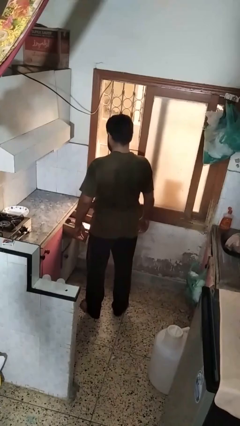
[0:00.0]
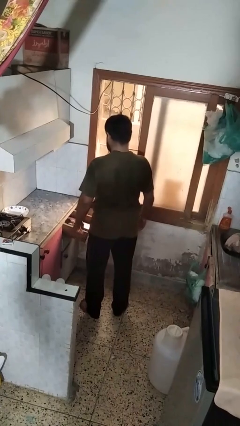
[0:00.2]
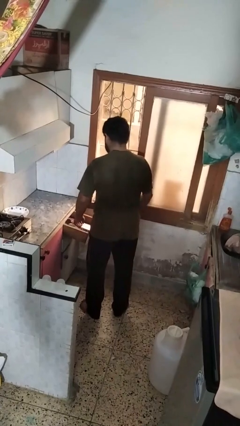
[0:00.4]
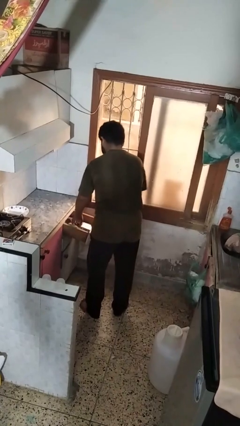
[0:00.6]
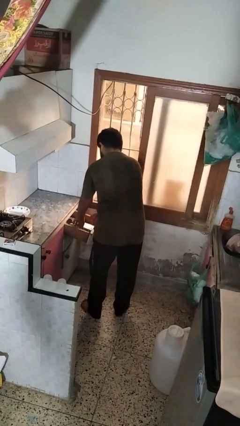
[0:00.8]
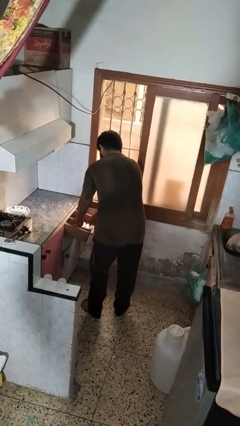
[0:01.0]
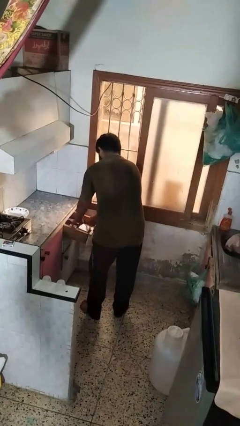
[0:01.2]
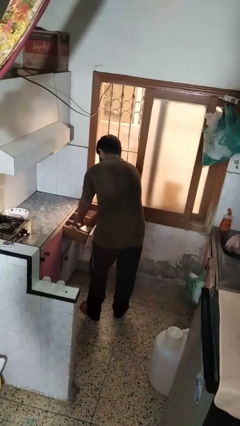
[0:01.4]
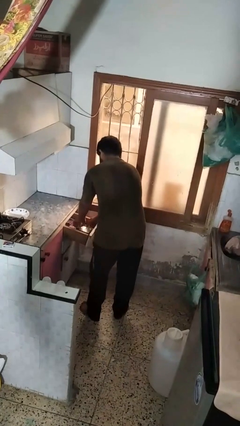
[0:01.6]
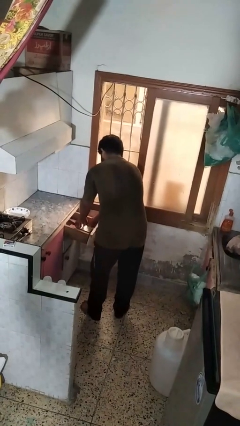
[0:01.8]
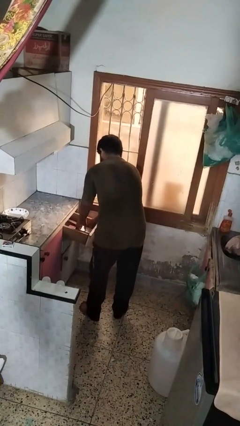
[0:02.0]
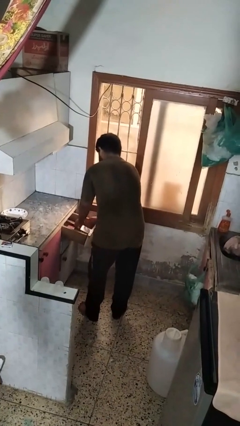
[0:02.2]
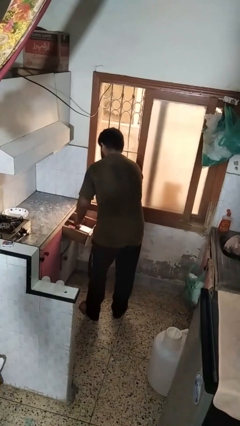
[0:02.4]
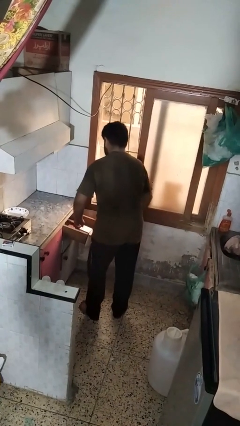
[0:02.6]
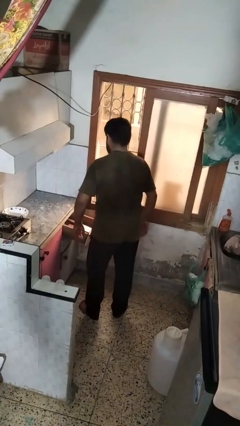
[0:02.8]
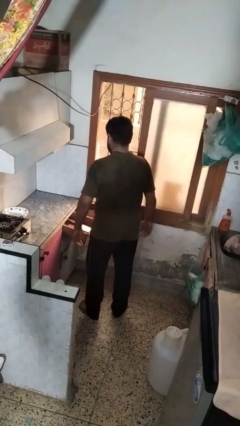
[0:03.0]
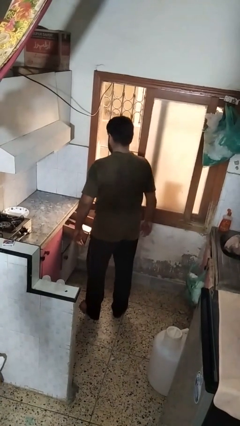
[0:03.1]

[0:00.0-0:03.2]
person searches in kitchen drawer

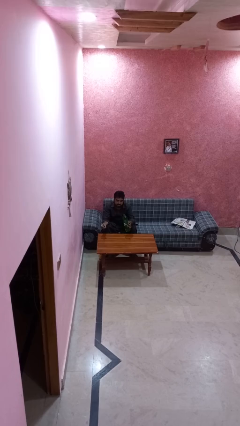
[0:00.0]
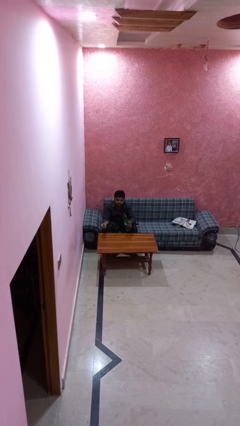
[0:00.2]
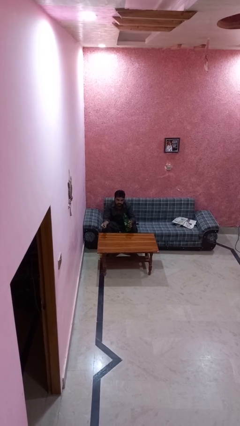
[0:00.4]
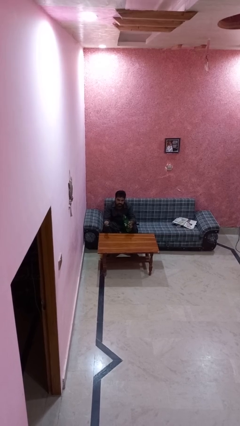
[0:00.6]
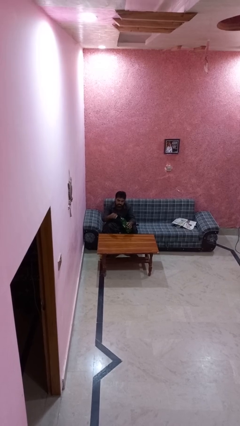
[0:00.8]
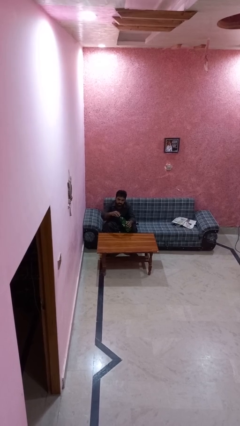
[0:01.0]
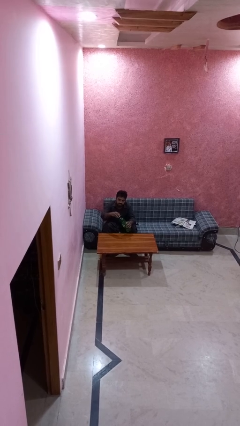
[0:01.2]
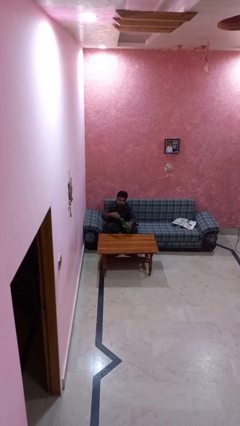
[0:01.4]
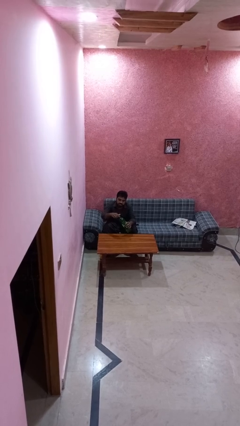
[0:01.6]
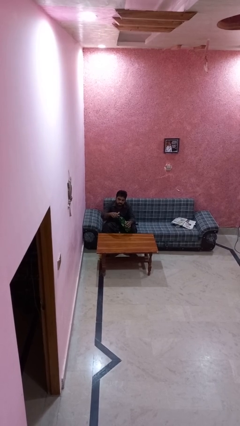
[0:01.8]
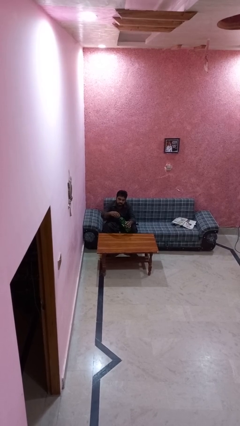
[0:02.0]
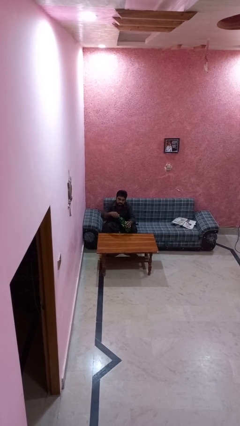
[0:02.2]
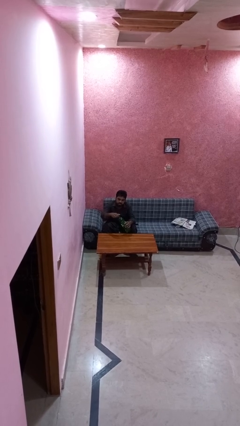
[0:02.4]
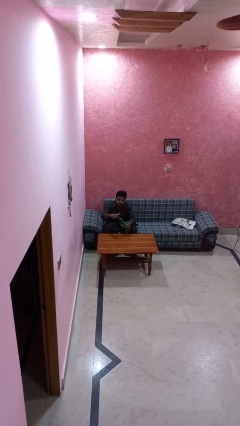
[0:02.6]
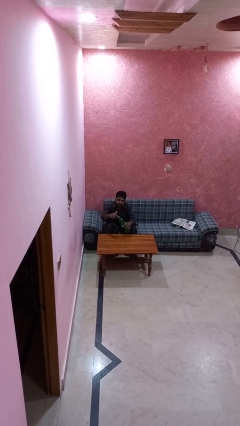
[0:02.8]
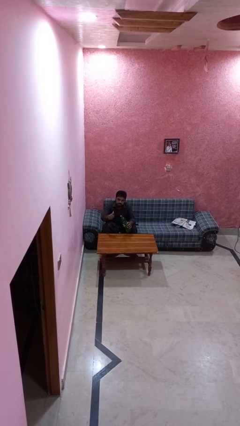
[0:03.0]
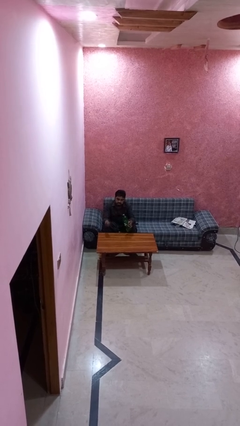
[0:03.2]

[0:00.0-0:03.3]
person screws lid to bottle

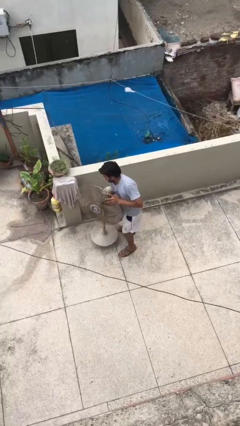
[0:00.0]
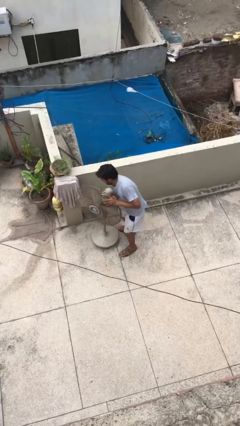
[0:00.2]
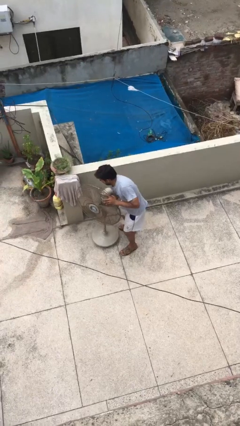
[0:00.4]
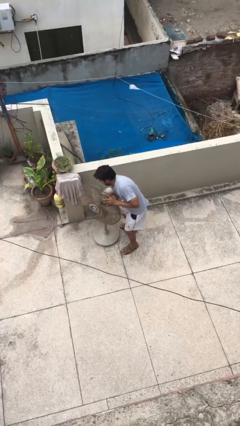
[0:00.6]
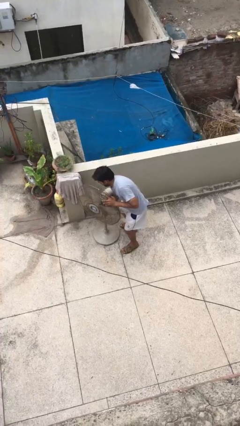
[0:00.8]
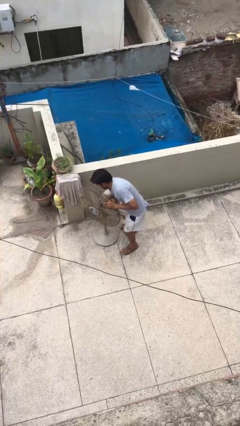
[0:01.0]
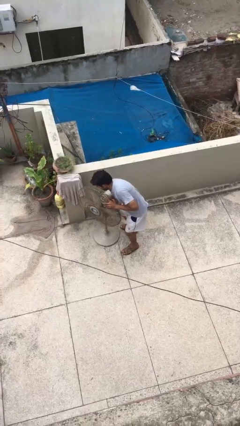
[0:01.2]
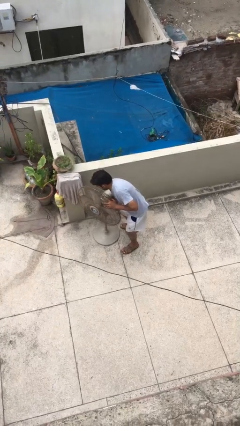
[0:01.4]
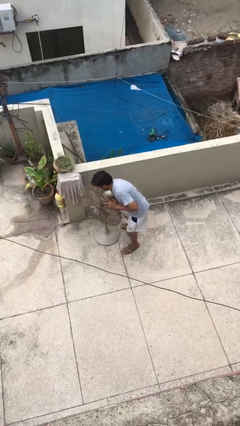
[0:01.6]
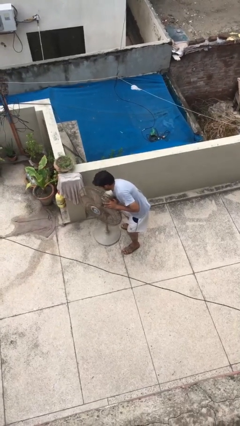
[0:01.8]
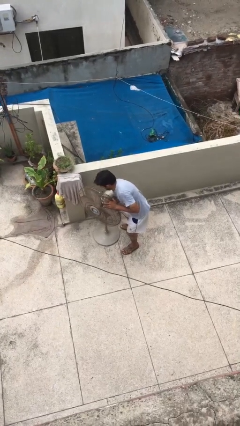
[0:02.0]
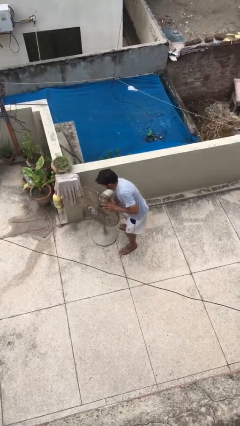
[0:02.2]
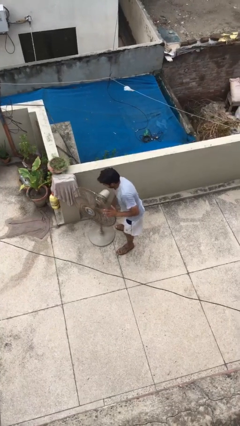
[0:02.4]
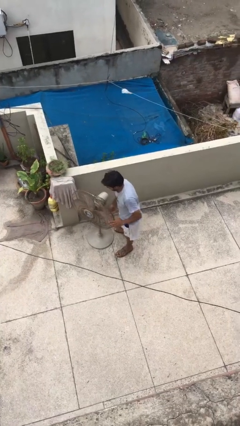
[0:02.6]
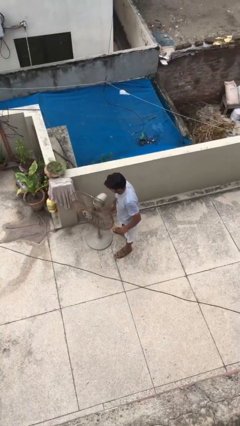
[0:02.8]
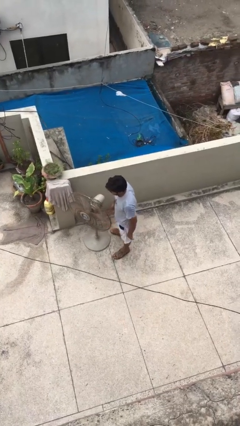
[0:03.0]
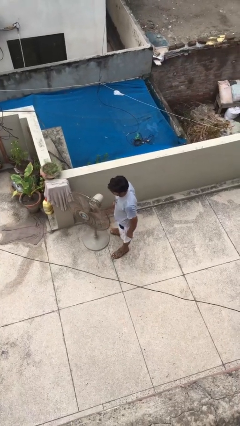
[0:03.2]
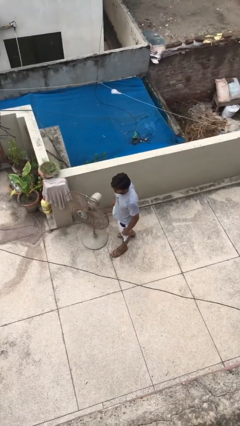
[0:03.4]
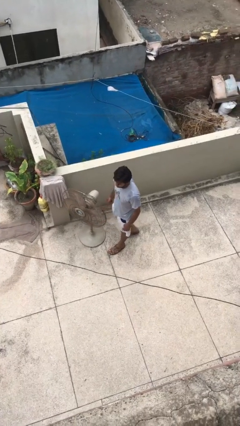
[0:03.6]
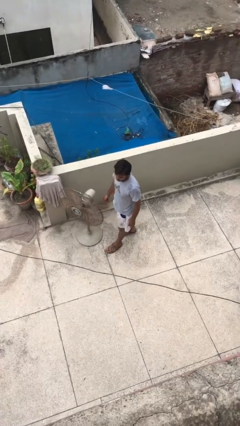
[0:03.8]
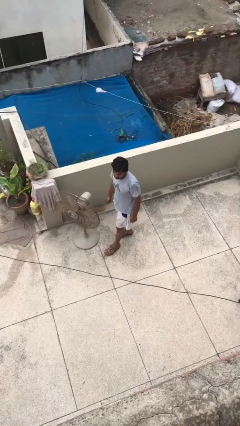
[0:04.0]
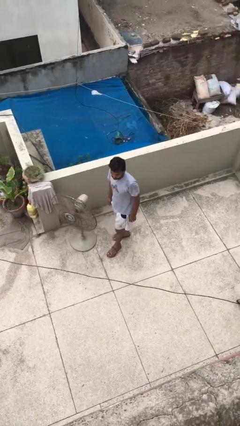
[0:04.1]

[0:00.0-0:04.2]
person puts down object on floor

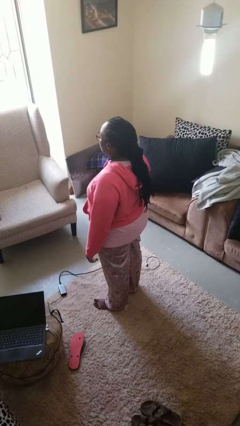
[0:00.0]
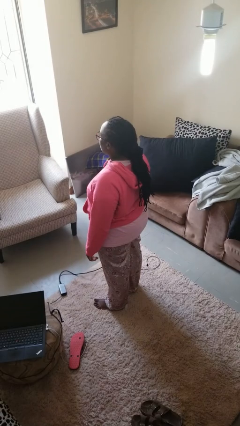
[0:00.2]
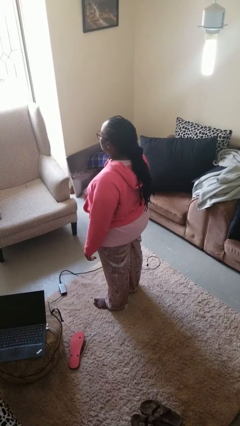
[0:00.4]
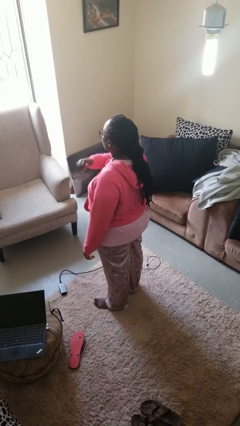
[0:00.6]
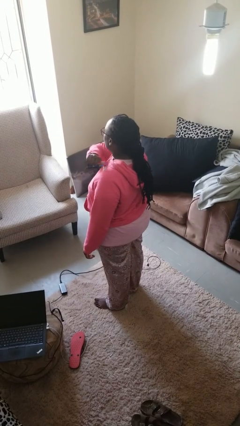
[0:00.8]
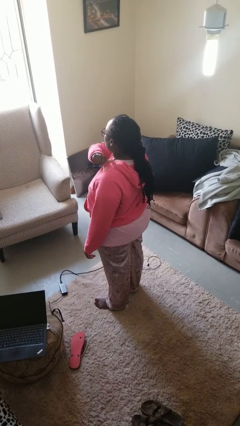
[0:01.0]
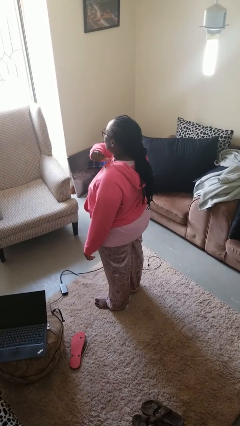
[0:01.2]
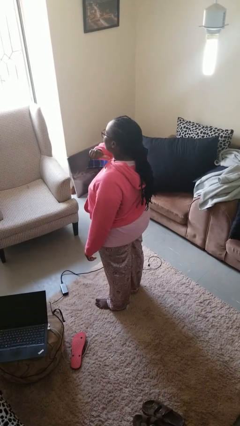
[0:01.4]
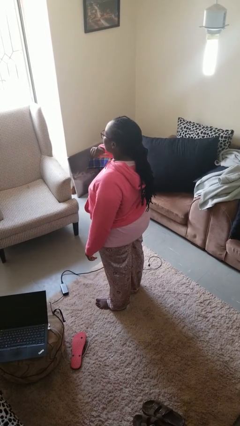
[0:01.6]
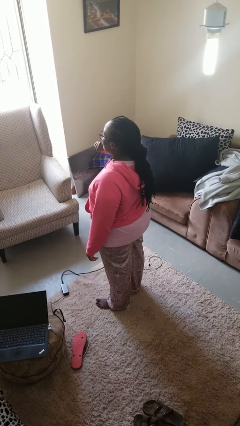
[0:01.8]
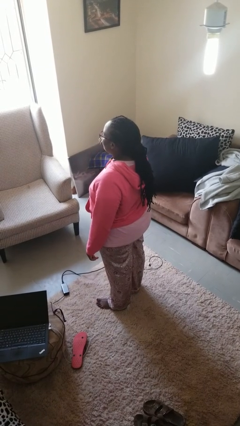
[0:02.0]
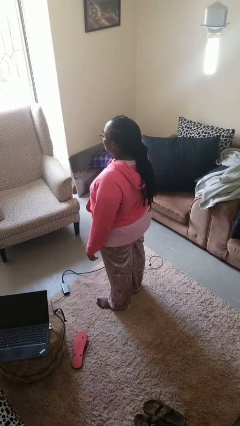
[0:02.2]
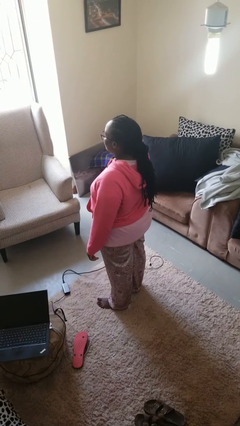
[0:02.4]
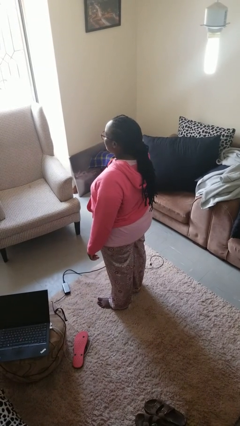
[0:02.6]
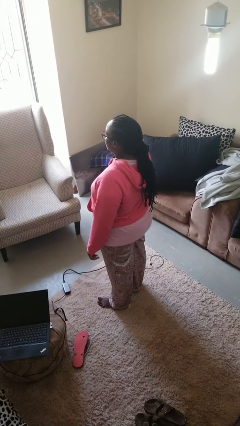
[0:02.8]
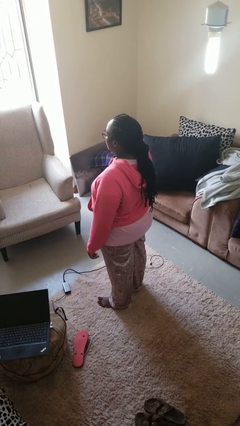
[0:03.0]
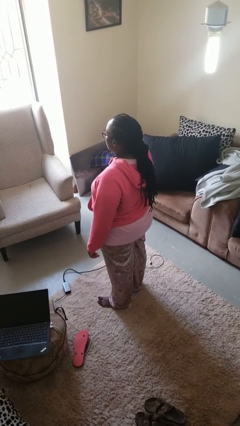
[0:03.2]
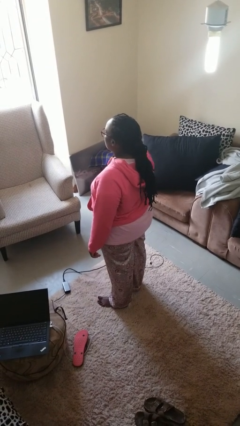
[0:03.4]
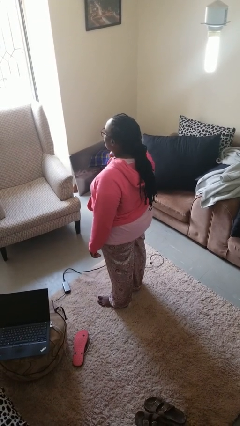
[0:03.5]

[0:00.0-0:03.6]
person gestures cut

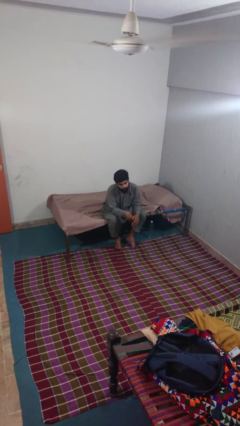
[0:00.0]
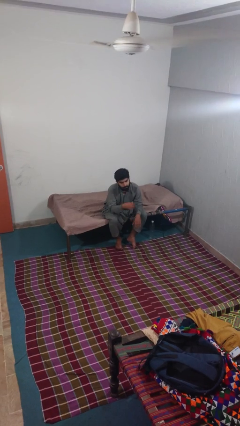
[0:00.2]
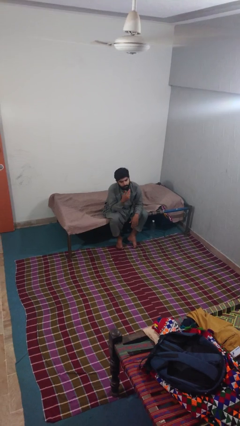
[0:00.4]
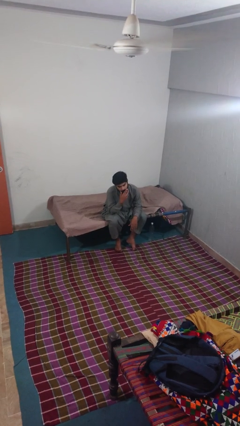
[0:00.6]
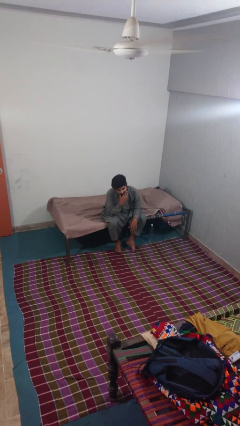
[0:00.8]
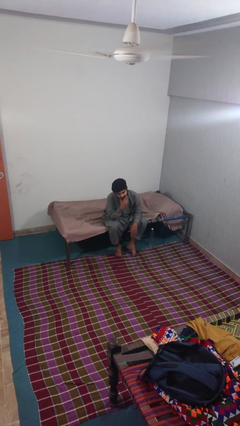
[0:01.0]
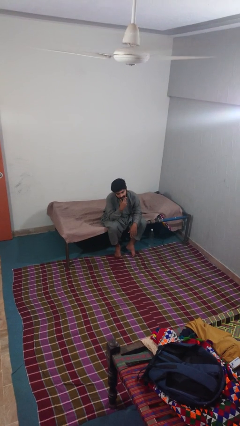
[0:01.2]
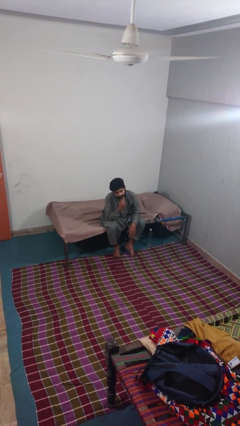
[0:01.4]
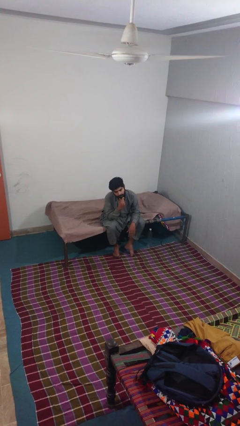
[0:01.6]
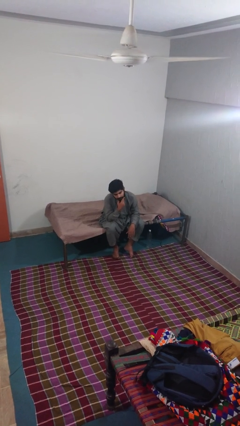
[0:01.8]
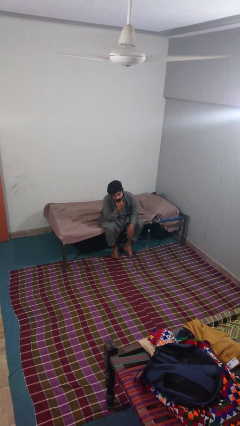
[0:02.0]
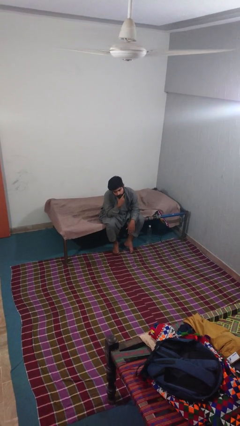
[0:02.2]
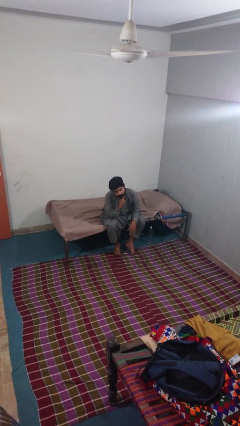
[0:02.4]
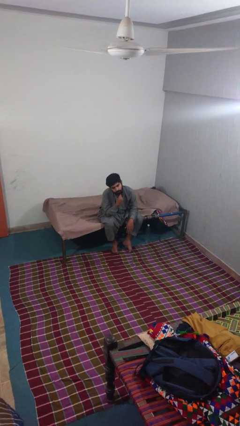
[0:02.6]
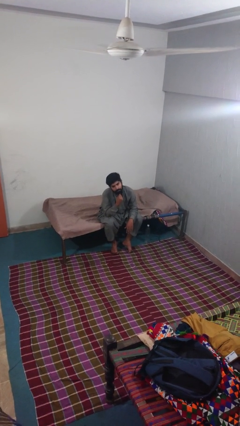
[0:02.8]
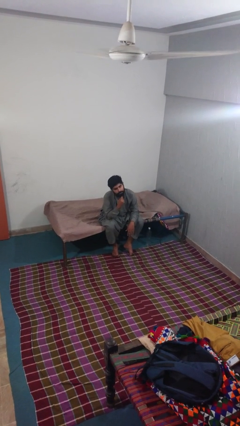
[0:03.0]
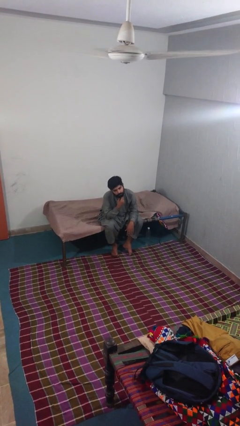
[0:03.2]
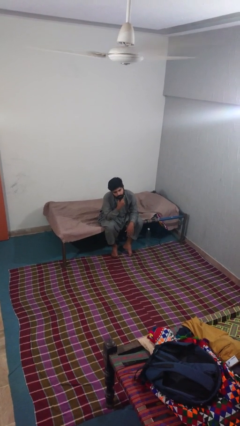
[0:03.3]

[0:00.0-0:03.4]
person strokes chin
